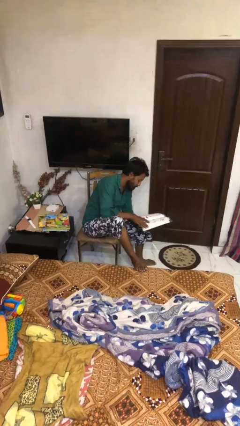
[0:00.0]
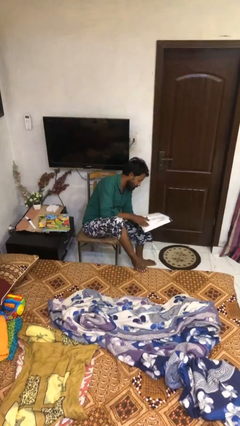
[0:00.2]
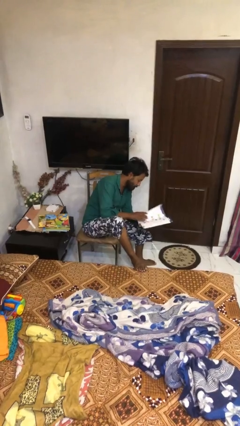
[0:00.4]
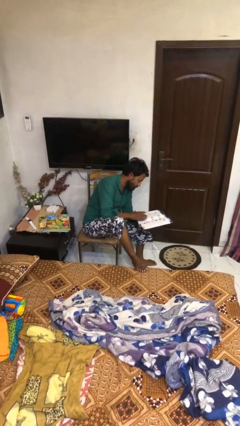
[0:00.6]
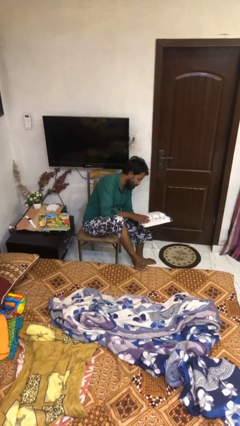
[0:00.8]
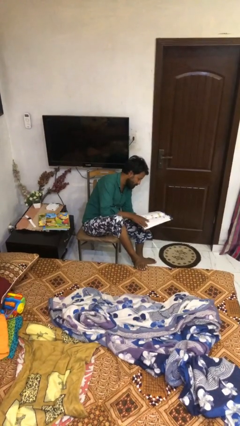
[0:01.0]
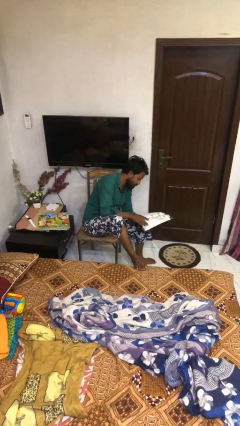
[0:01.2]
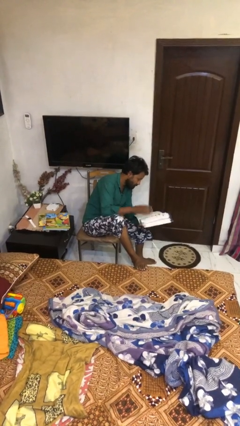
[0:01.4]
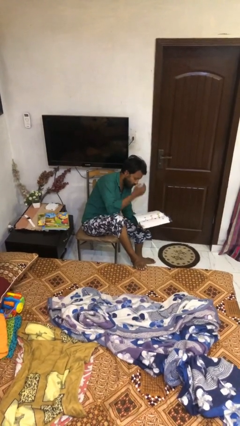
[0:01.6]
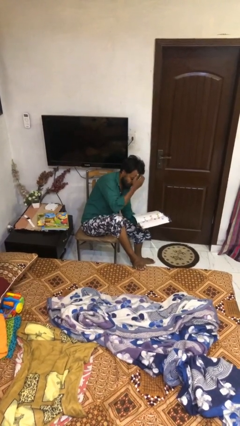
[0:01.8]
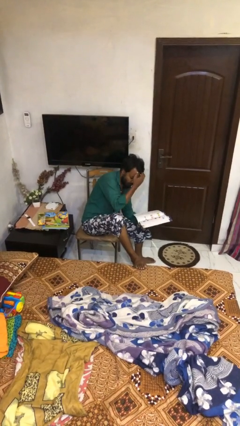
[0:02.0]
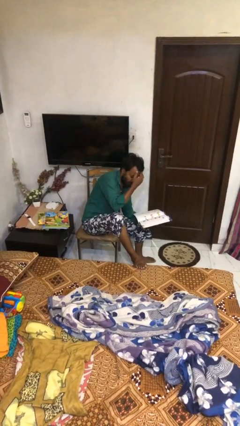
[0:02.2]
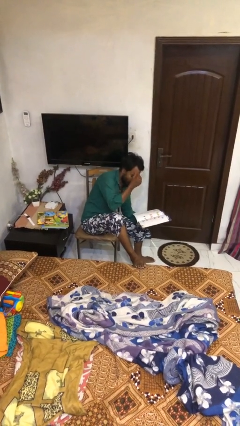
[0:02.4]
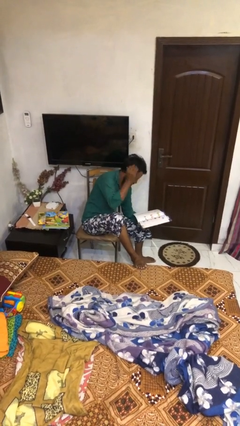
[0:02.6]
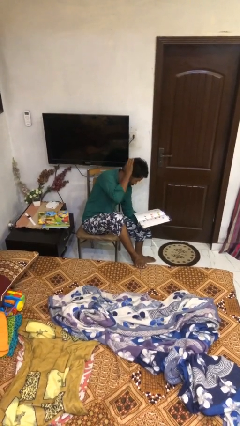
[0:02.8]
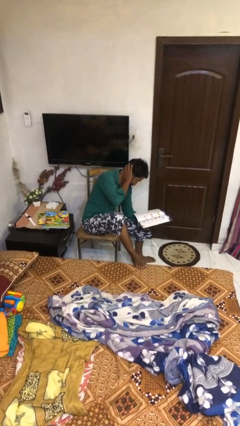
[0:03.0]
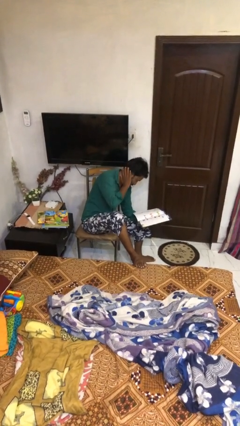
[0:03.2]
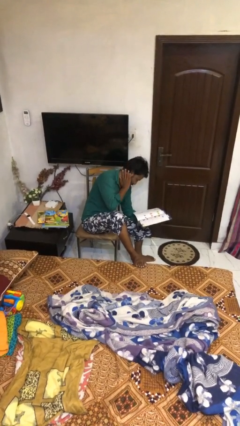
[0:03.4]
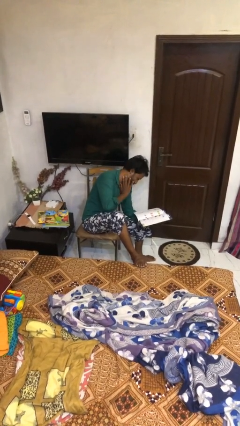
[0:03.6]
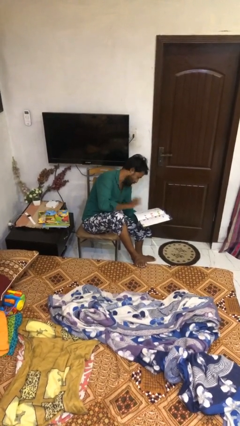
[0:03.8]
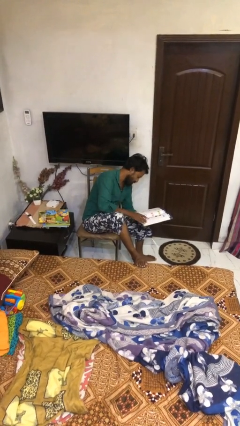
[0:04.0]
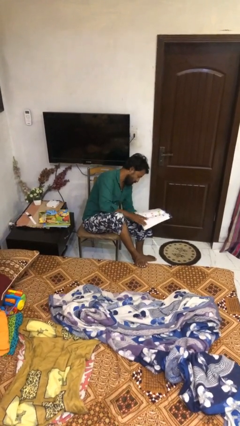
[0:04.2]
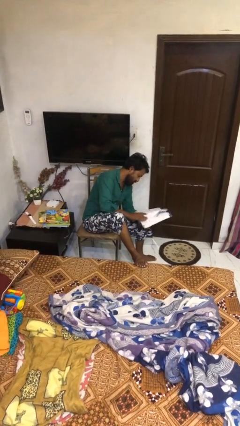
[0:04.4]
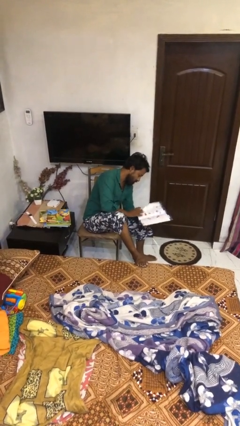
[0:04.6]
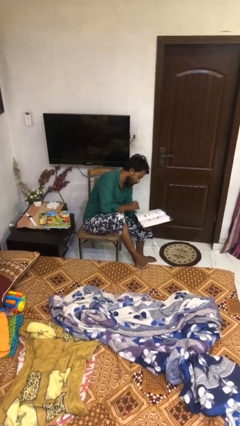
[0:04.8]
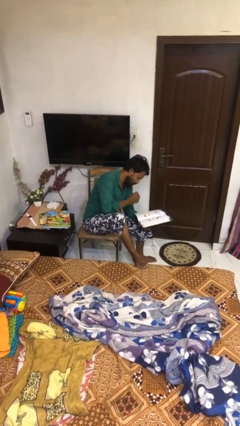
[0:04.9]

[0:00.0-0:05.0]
person reads document

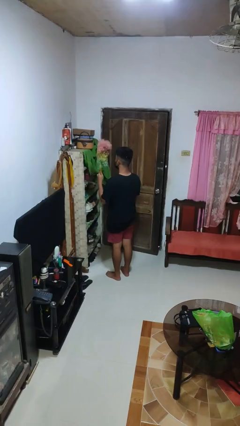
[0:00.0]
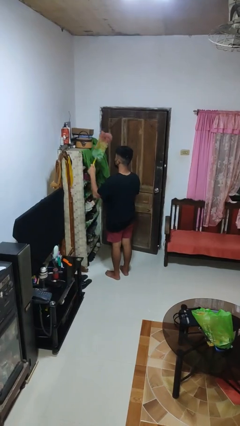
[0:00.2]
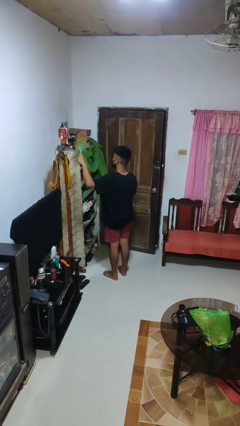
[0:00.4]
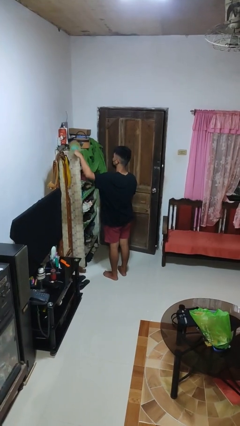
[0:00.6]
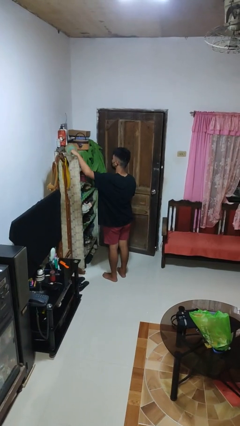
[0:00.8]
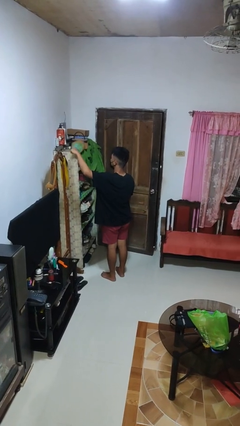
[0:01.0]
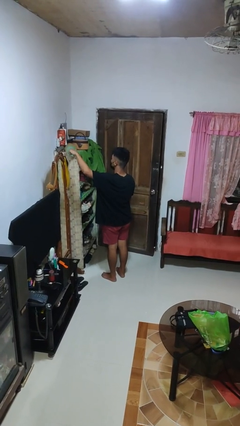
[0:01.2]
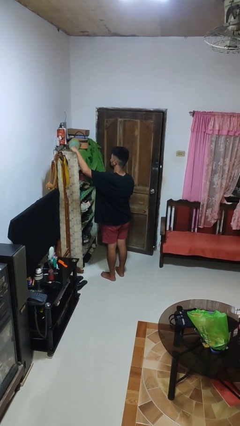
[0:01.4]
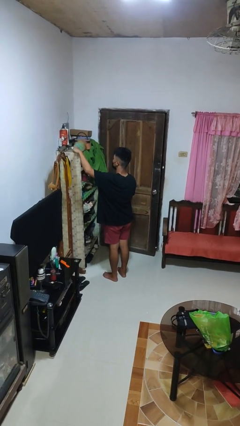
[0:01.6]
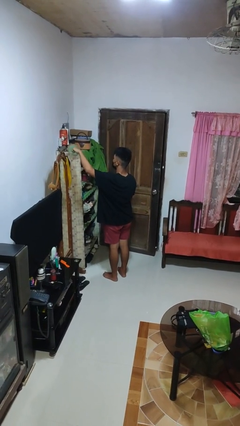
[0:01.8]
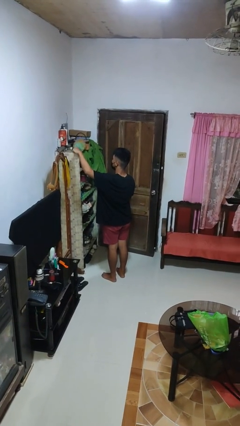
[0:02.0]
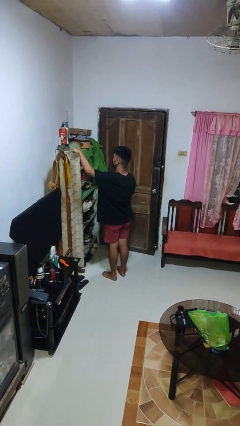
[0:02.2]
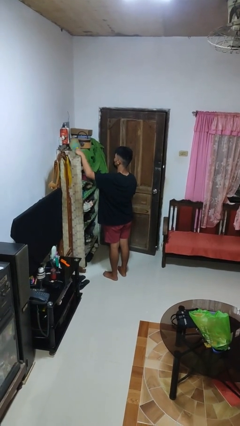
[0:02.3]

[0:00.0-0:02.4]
person dusts furniture

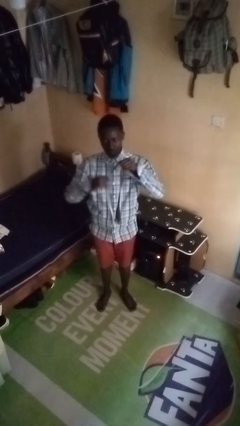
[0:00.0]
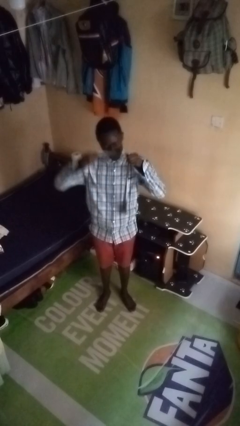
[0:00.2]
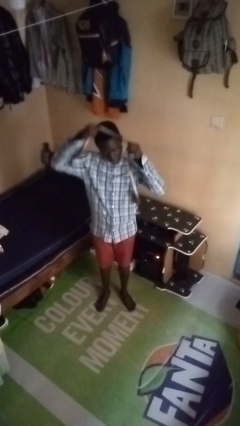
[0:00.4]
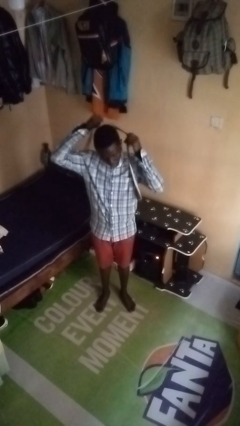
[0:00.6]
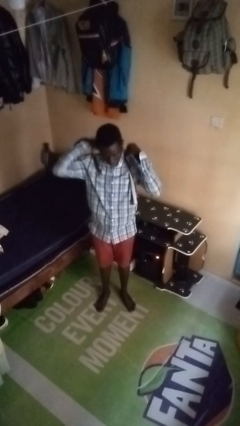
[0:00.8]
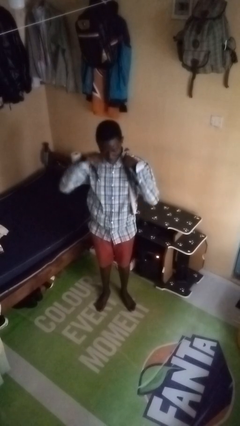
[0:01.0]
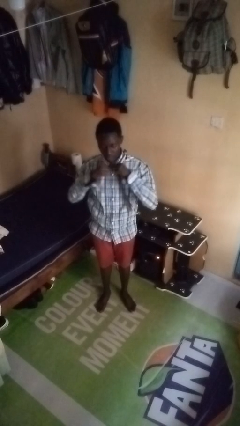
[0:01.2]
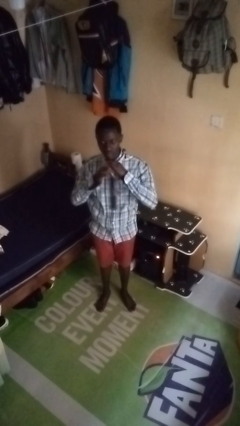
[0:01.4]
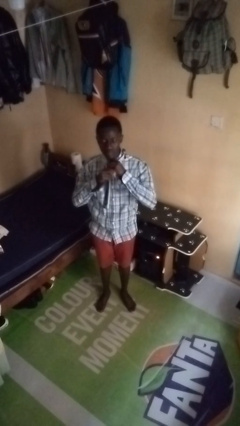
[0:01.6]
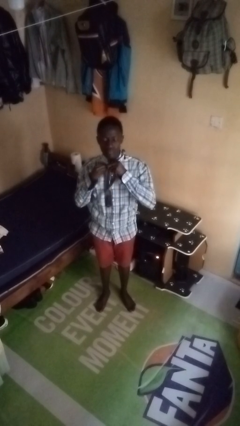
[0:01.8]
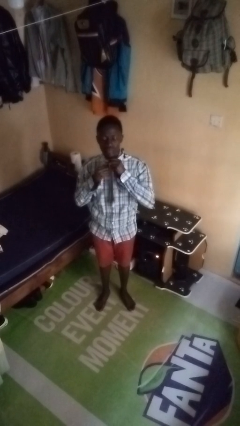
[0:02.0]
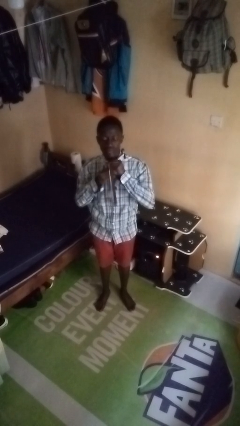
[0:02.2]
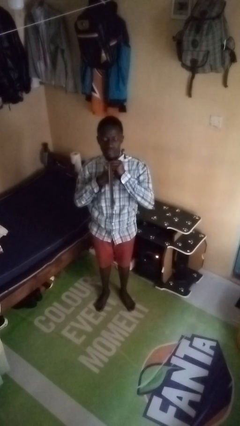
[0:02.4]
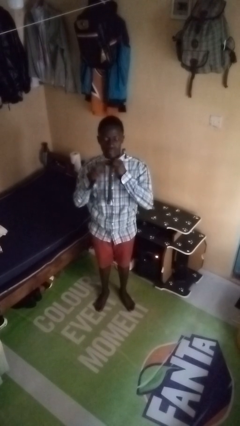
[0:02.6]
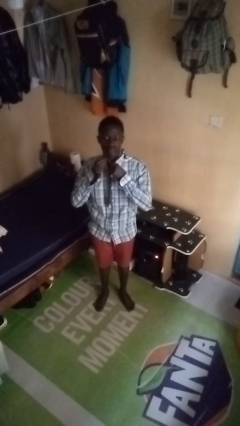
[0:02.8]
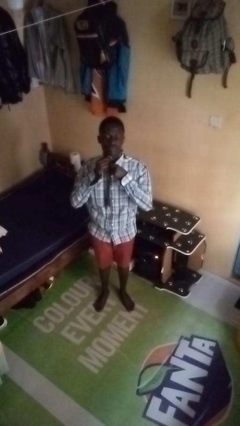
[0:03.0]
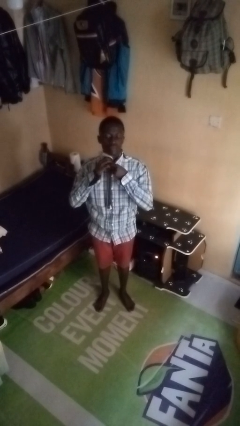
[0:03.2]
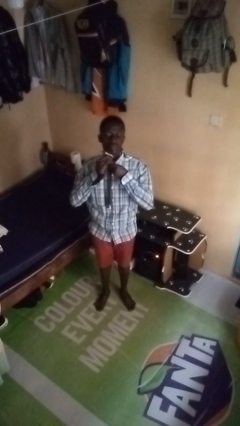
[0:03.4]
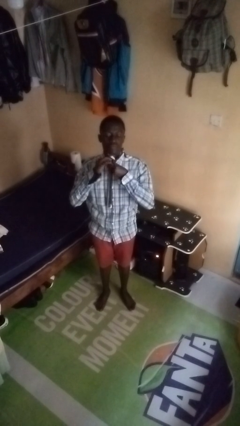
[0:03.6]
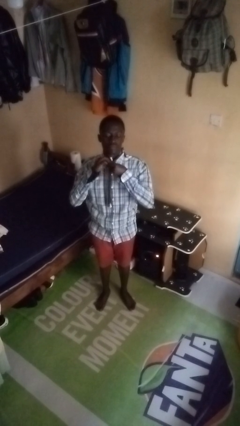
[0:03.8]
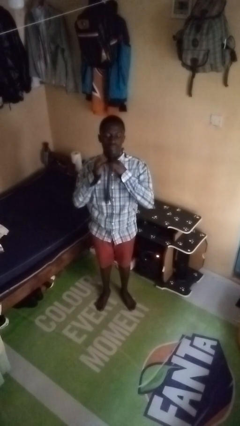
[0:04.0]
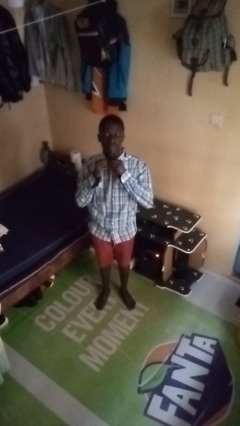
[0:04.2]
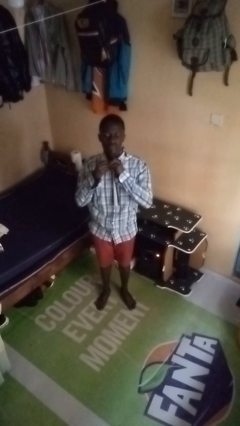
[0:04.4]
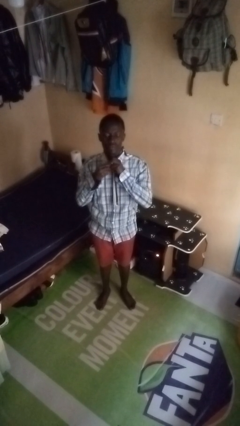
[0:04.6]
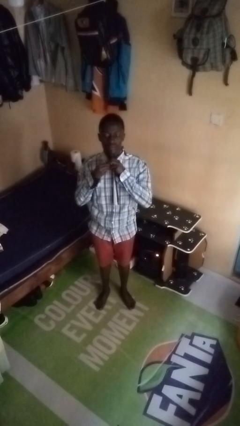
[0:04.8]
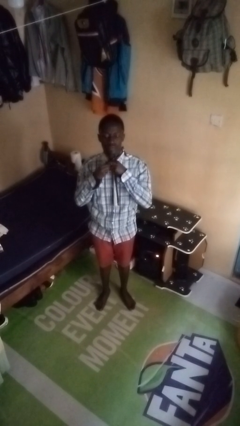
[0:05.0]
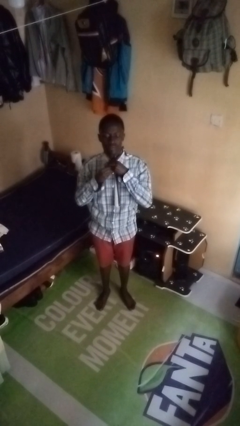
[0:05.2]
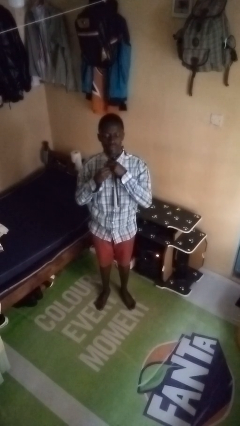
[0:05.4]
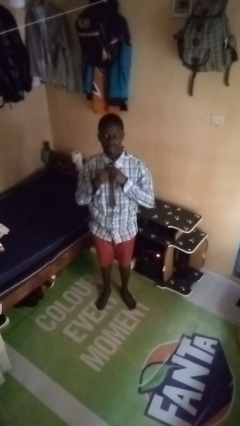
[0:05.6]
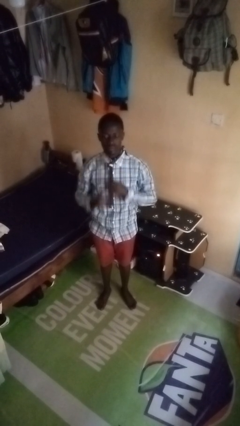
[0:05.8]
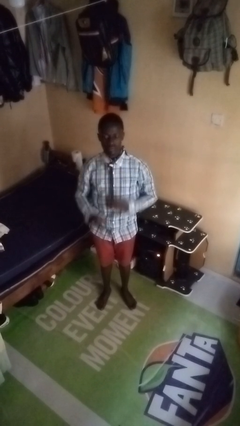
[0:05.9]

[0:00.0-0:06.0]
person puts on necktie

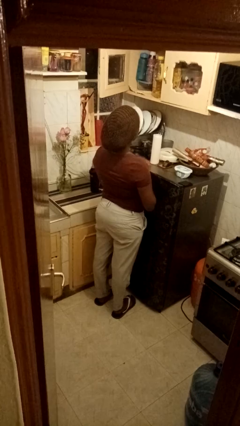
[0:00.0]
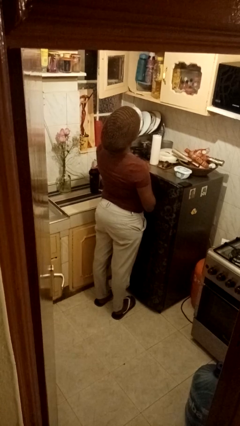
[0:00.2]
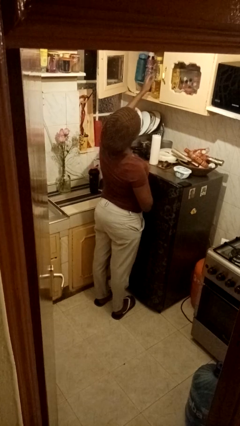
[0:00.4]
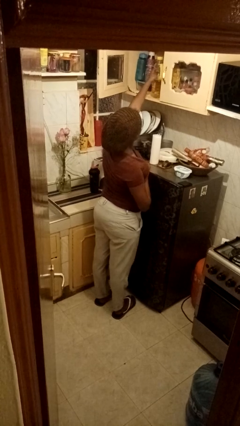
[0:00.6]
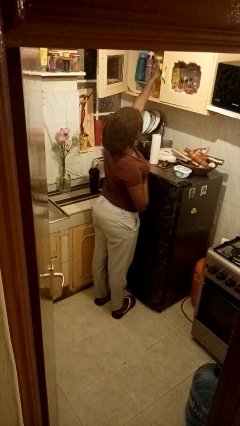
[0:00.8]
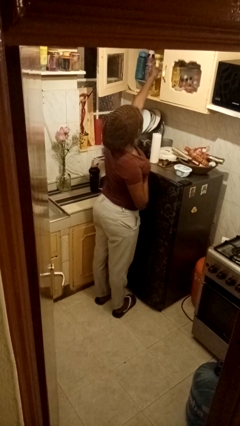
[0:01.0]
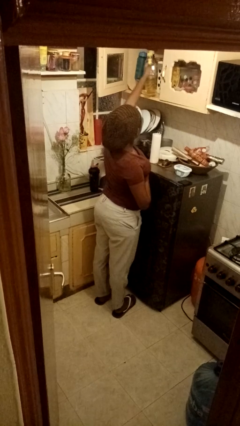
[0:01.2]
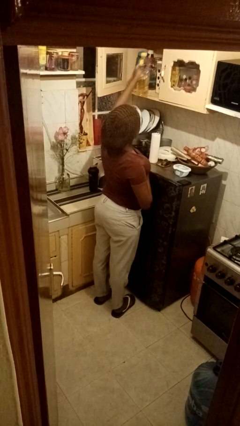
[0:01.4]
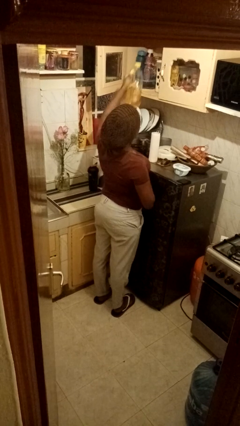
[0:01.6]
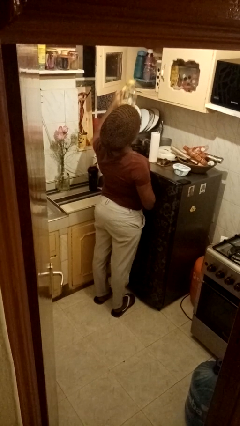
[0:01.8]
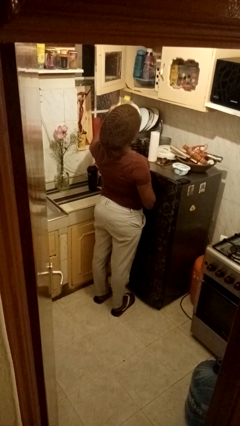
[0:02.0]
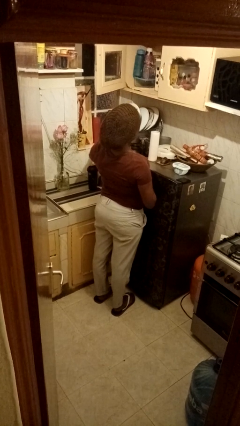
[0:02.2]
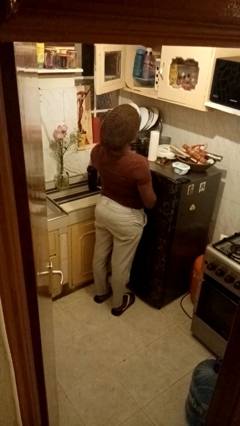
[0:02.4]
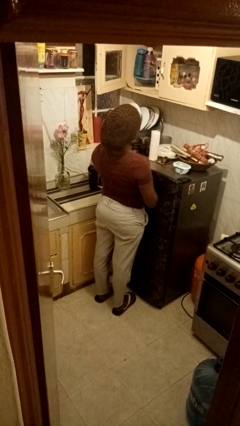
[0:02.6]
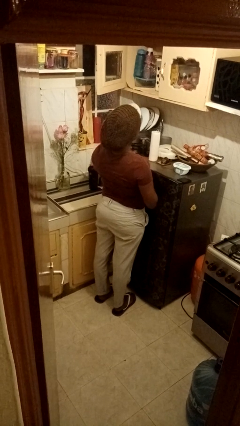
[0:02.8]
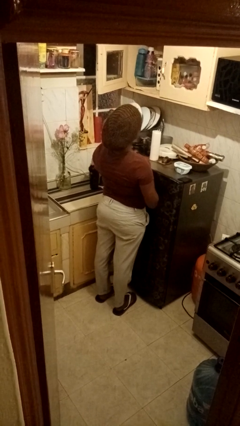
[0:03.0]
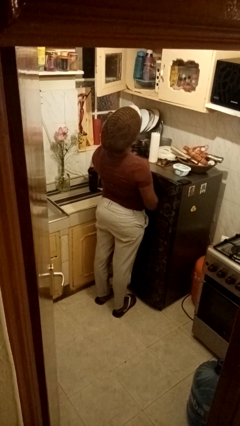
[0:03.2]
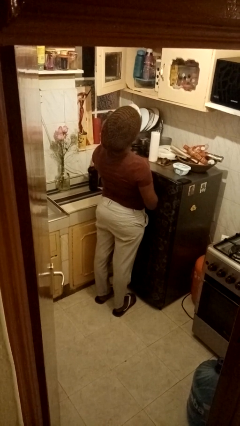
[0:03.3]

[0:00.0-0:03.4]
person picks up object from shelf

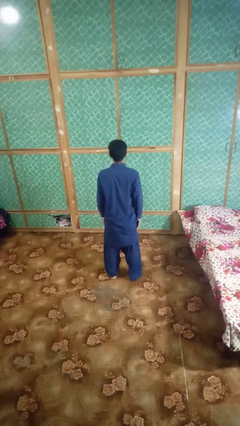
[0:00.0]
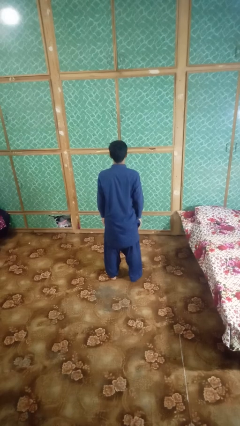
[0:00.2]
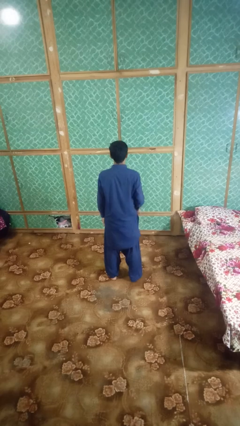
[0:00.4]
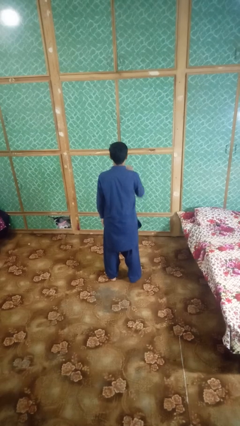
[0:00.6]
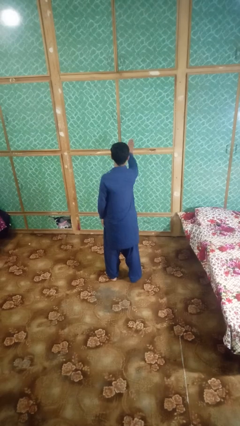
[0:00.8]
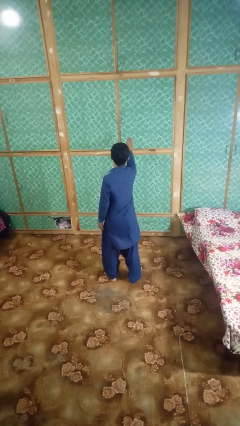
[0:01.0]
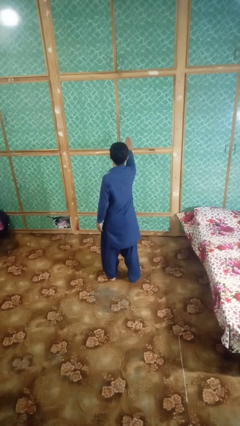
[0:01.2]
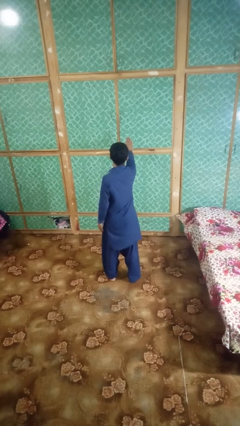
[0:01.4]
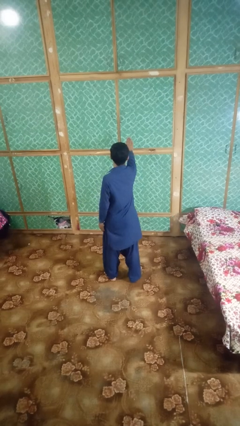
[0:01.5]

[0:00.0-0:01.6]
person gestures stop
